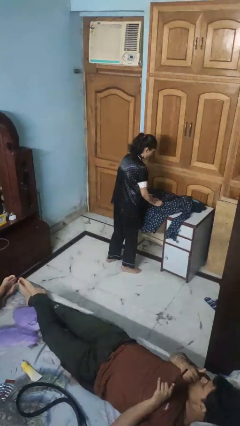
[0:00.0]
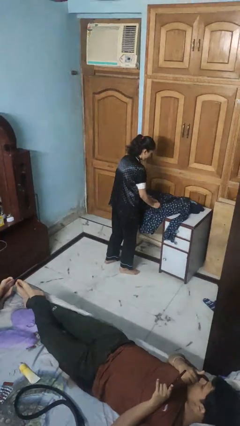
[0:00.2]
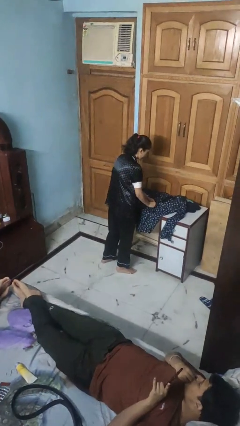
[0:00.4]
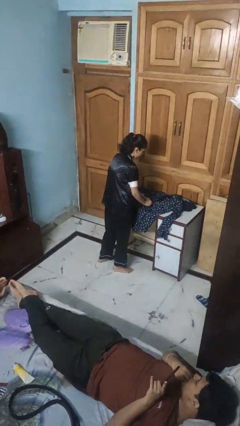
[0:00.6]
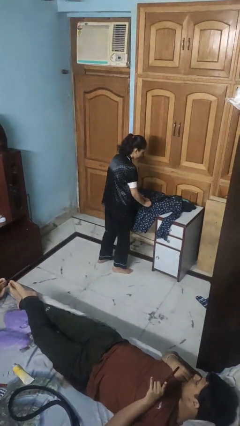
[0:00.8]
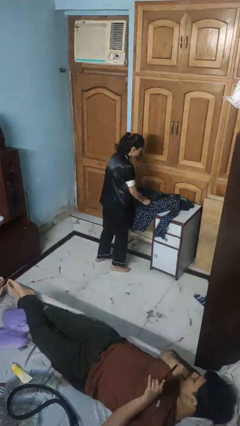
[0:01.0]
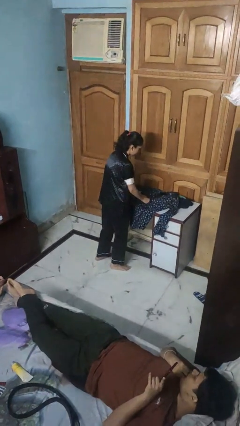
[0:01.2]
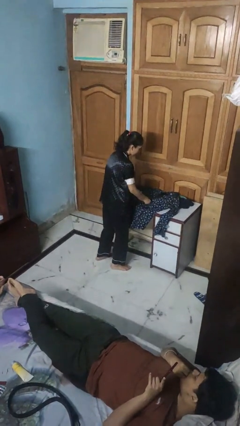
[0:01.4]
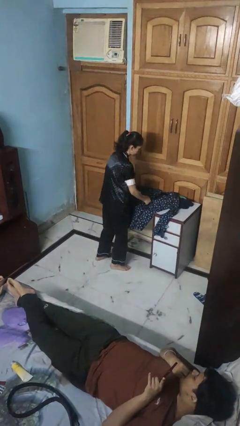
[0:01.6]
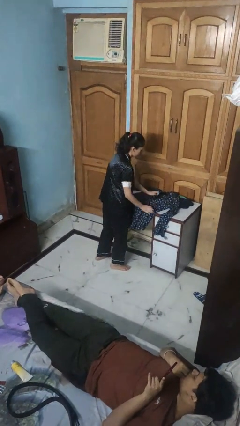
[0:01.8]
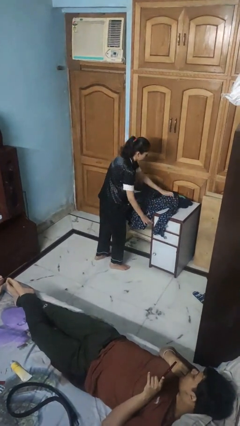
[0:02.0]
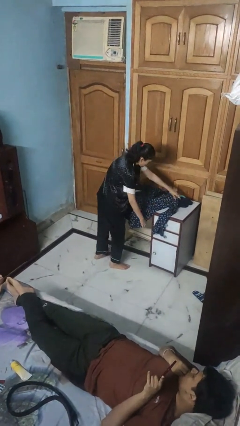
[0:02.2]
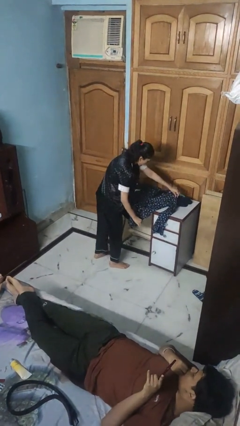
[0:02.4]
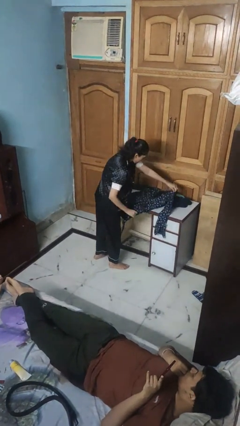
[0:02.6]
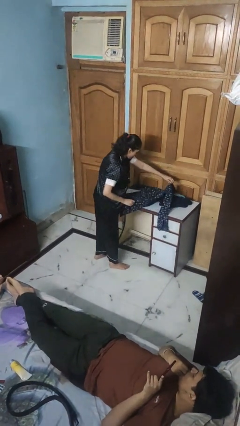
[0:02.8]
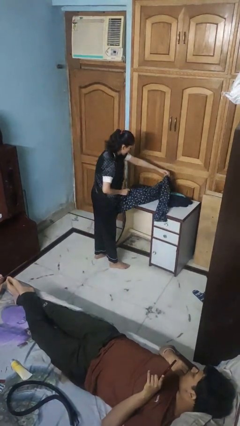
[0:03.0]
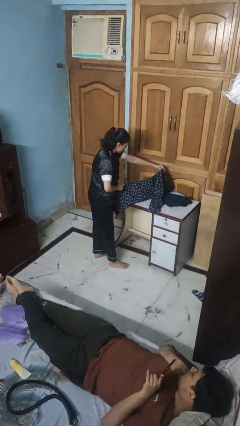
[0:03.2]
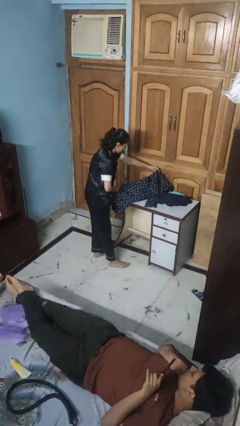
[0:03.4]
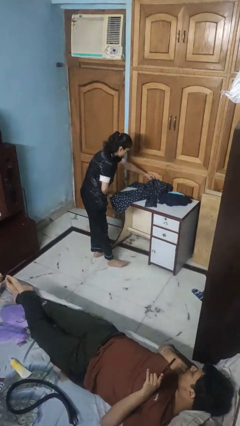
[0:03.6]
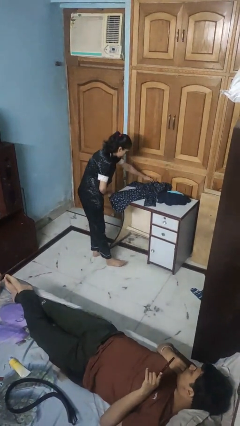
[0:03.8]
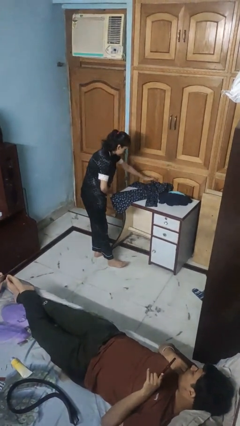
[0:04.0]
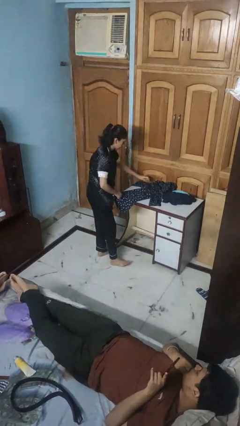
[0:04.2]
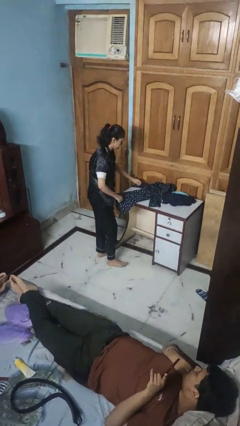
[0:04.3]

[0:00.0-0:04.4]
person folds shirt

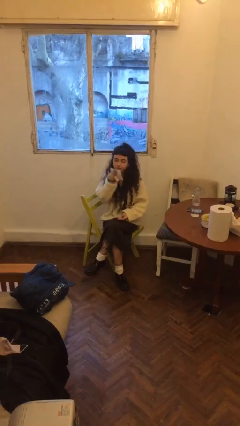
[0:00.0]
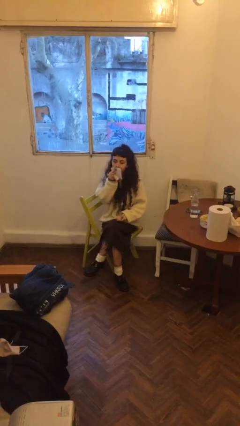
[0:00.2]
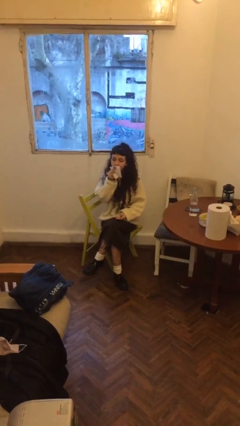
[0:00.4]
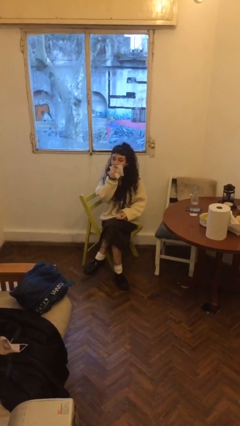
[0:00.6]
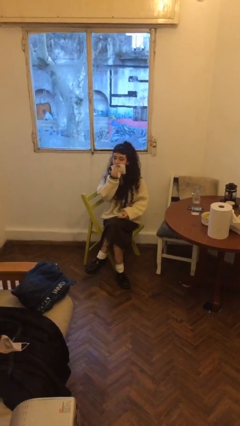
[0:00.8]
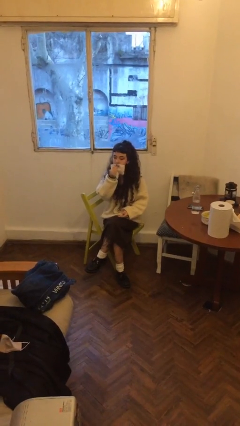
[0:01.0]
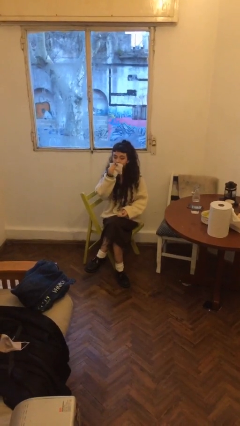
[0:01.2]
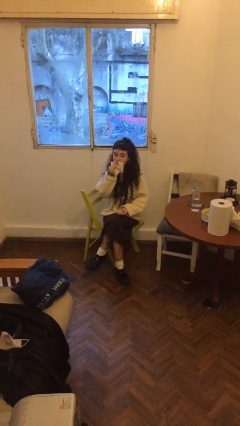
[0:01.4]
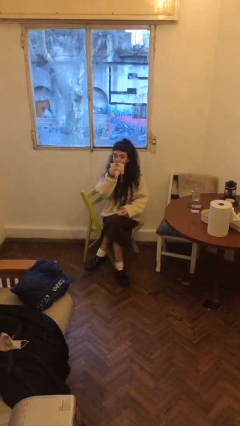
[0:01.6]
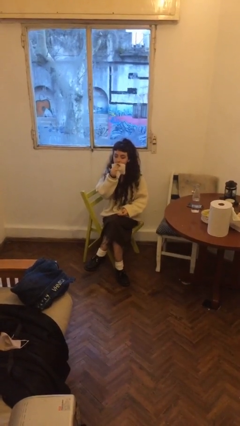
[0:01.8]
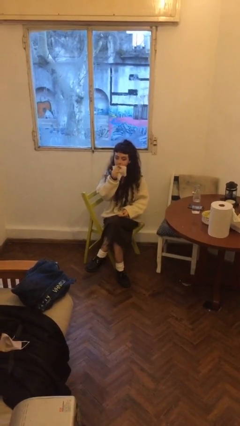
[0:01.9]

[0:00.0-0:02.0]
person wipes mouth with napkin

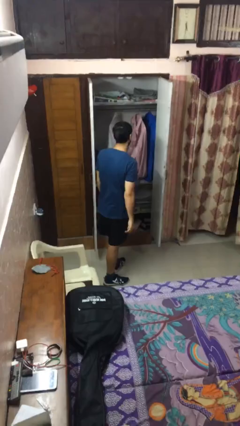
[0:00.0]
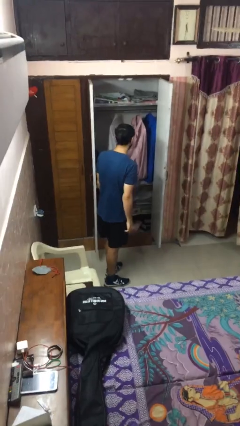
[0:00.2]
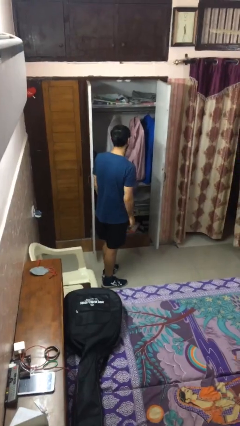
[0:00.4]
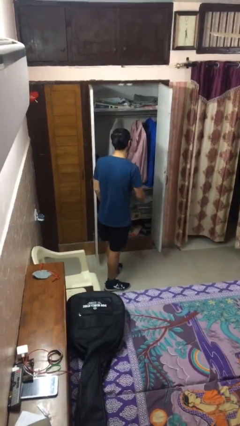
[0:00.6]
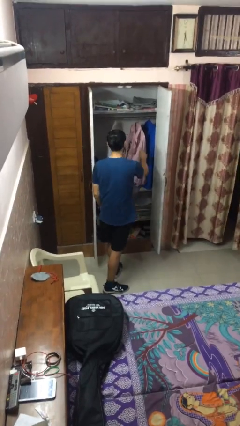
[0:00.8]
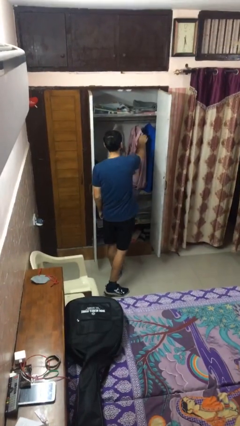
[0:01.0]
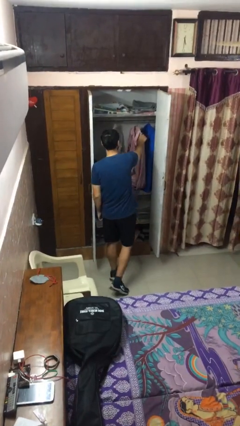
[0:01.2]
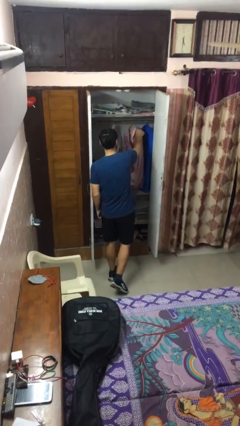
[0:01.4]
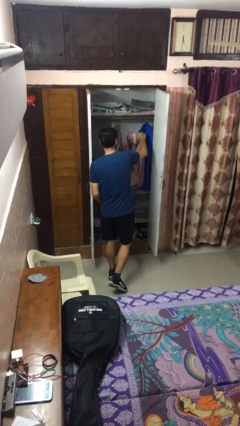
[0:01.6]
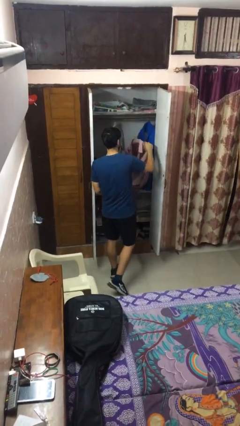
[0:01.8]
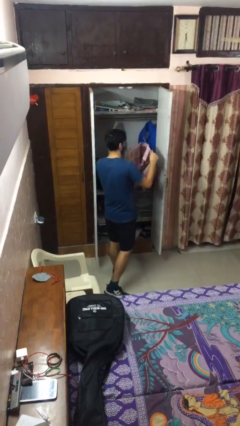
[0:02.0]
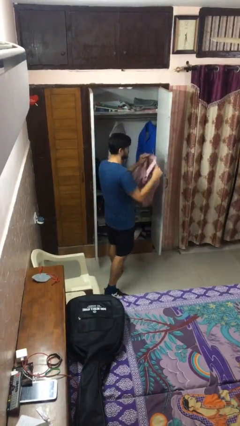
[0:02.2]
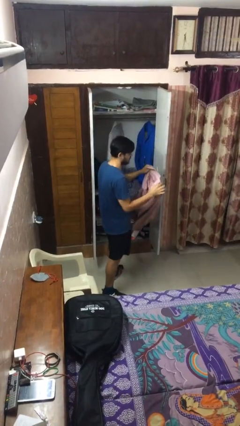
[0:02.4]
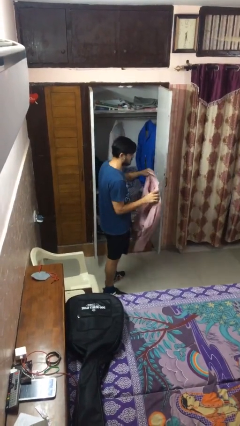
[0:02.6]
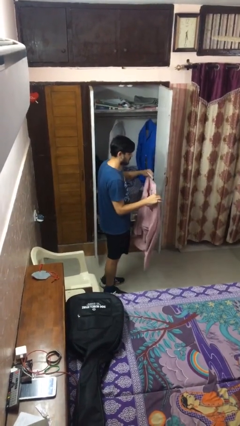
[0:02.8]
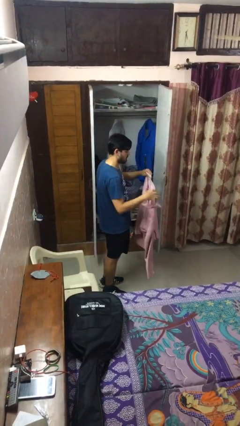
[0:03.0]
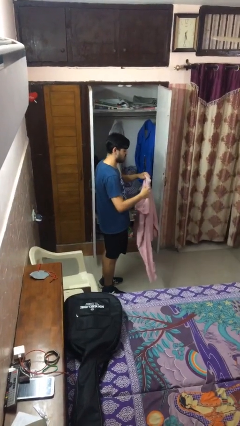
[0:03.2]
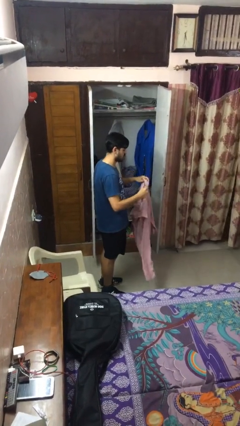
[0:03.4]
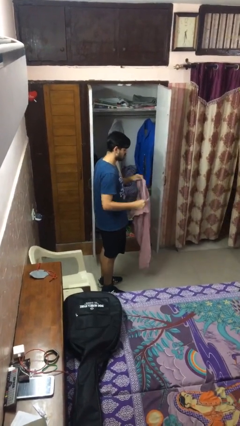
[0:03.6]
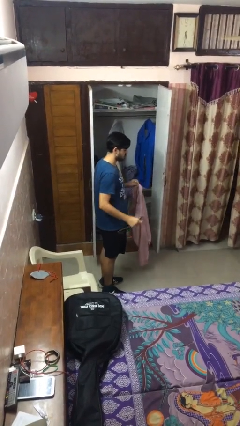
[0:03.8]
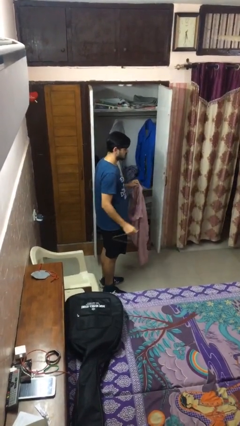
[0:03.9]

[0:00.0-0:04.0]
person takes clothes from closet

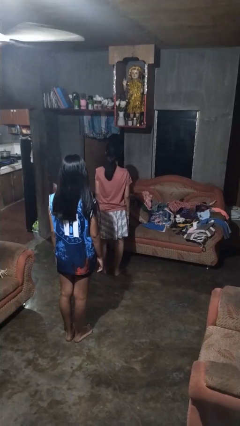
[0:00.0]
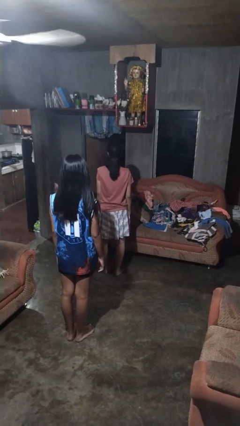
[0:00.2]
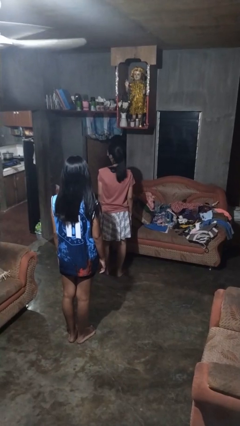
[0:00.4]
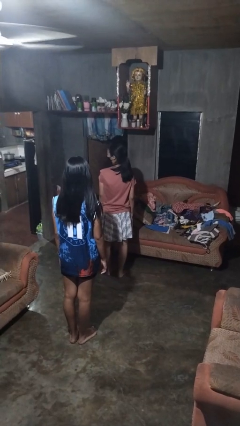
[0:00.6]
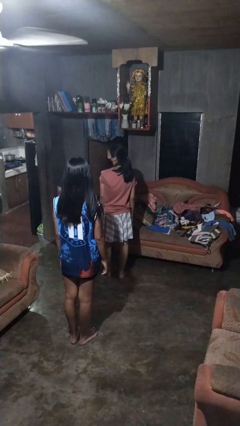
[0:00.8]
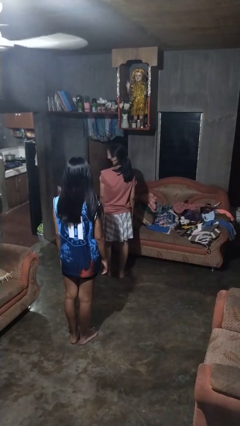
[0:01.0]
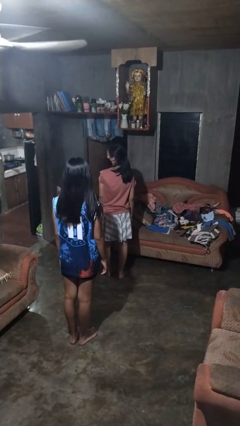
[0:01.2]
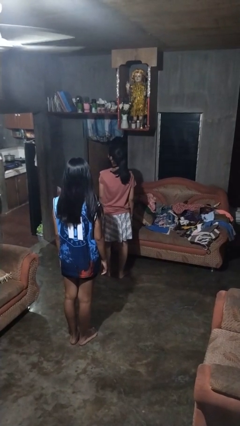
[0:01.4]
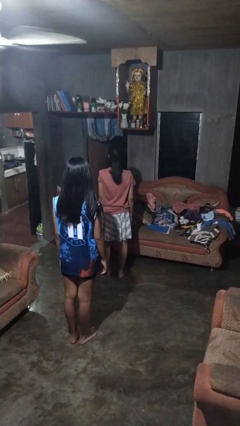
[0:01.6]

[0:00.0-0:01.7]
person looks over shoulder

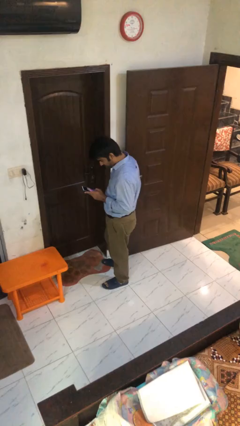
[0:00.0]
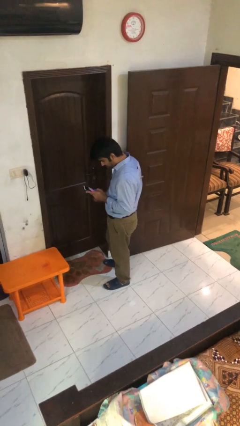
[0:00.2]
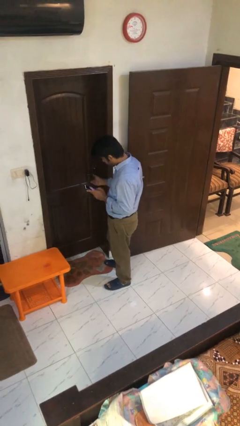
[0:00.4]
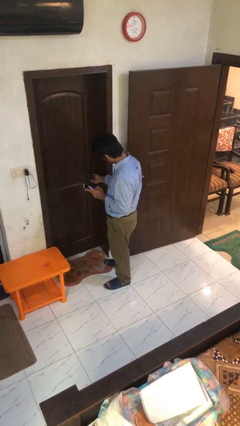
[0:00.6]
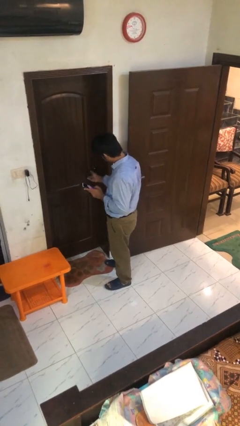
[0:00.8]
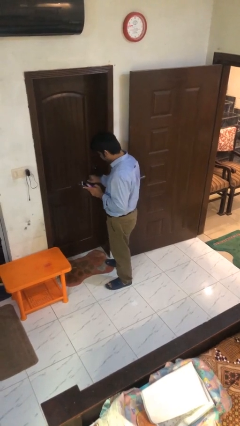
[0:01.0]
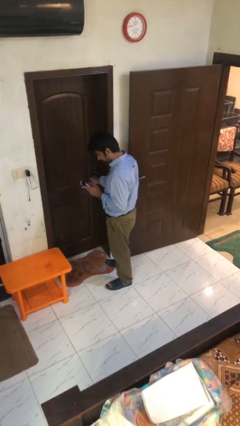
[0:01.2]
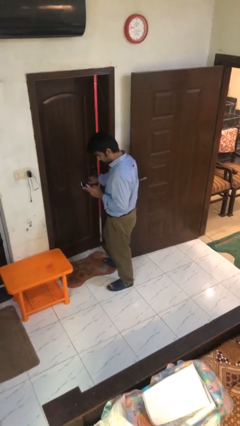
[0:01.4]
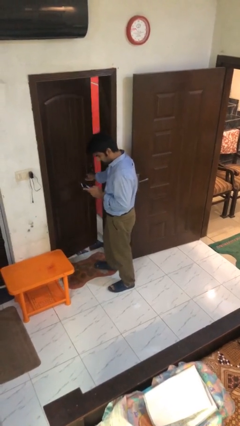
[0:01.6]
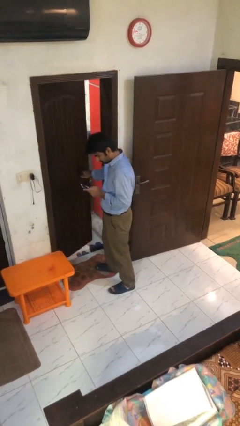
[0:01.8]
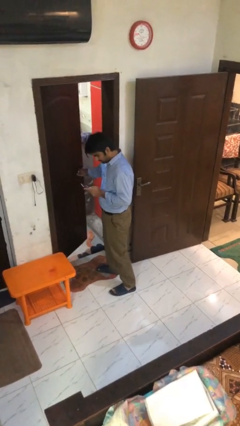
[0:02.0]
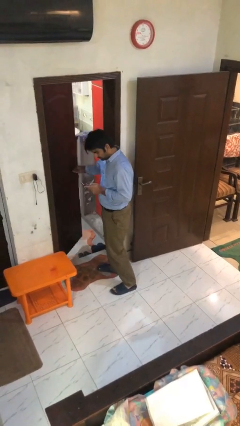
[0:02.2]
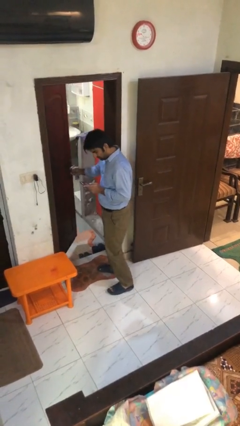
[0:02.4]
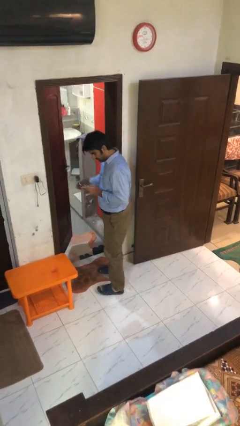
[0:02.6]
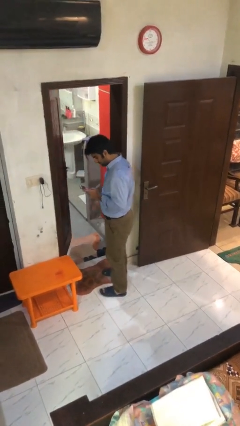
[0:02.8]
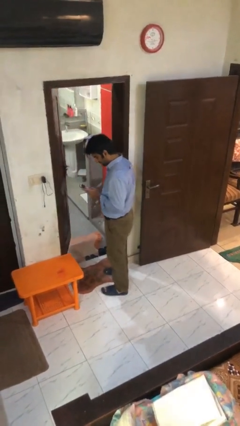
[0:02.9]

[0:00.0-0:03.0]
person opens facility door

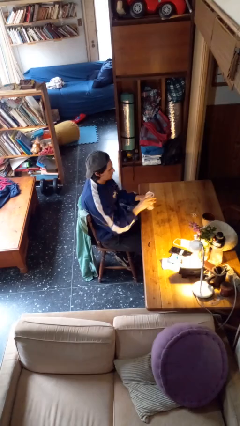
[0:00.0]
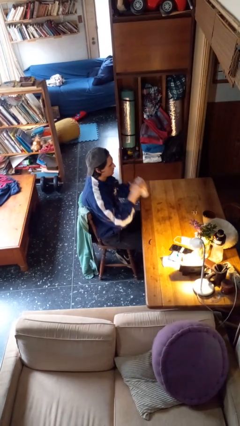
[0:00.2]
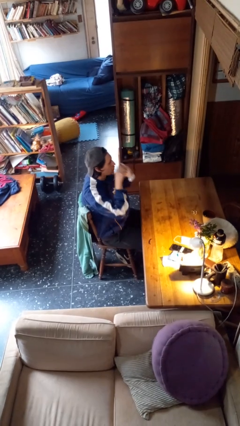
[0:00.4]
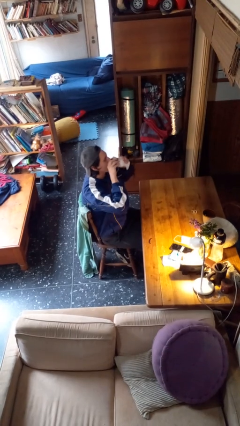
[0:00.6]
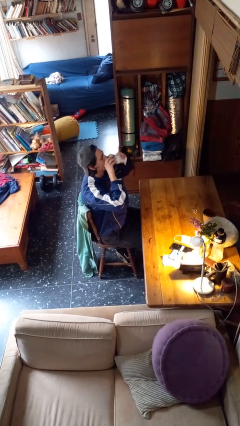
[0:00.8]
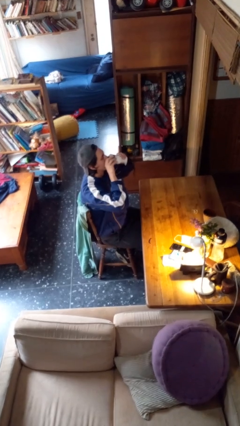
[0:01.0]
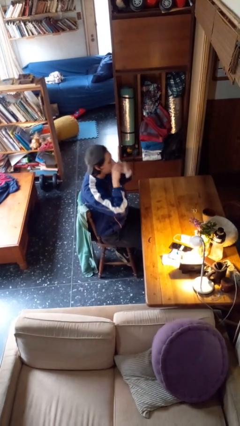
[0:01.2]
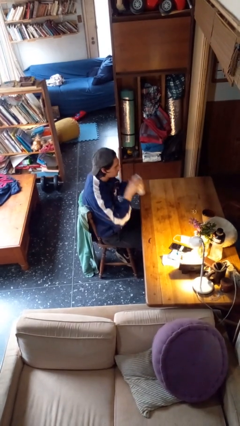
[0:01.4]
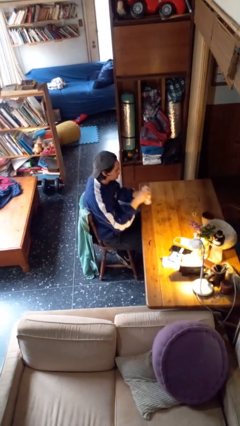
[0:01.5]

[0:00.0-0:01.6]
person drinks from mug

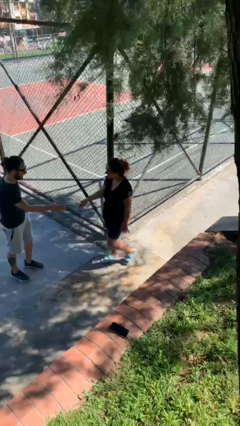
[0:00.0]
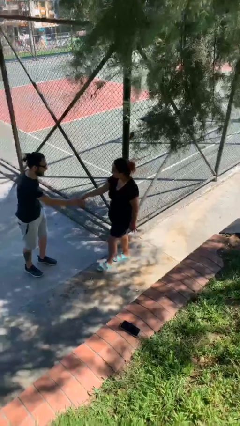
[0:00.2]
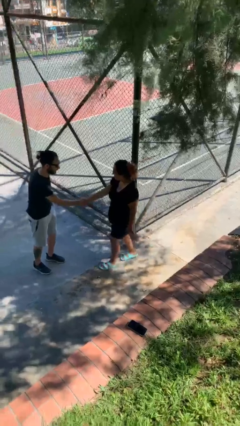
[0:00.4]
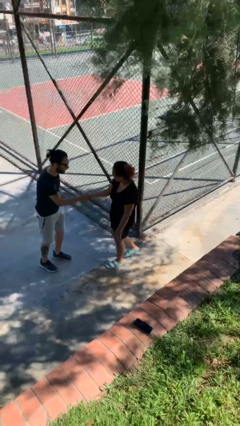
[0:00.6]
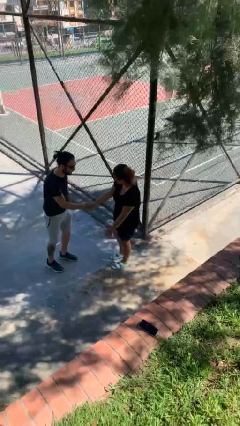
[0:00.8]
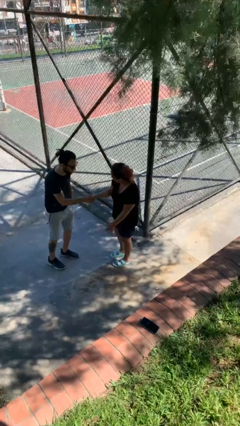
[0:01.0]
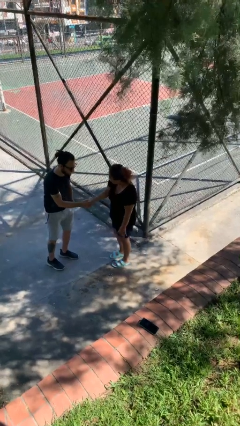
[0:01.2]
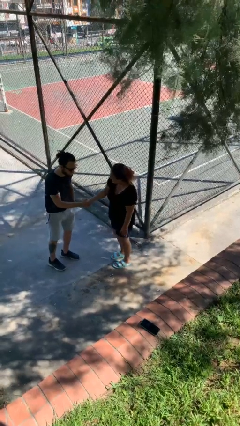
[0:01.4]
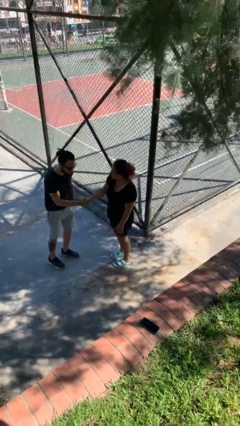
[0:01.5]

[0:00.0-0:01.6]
person shakes hand
